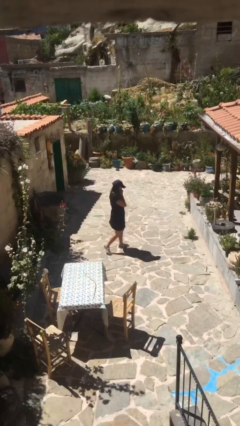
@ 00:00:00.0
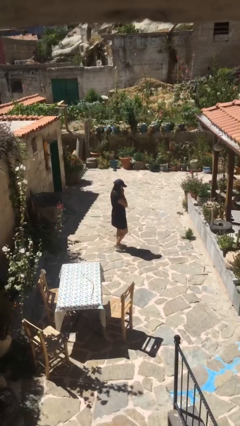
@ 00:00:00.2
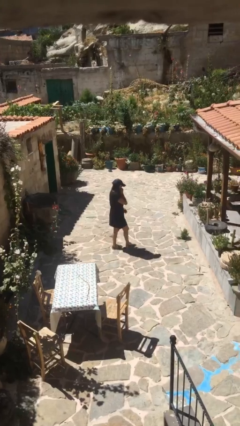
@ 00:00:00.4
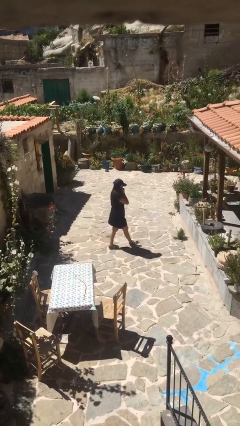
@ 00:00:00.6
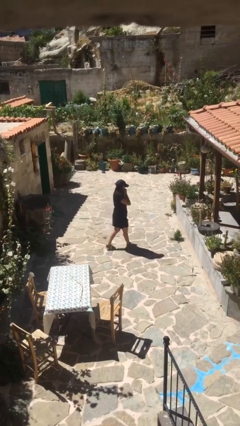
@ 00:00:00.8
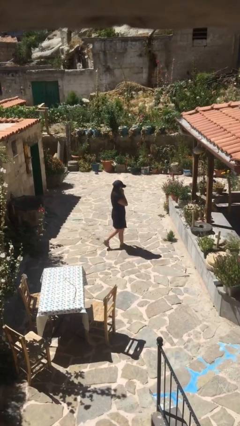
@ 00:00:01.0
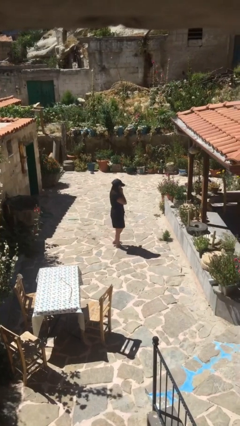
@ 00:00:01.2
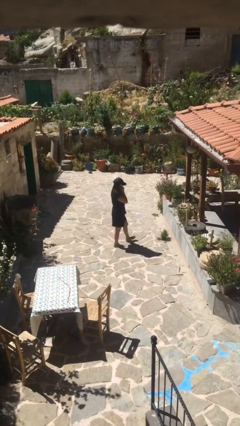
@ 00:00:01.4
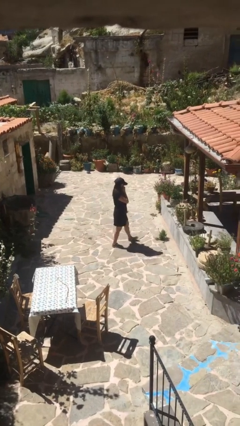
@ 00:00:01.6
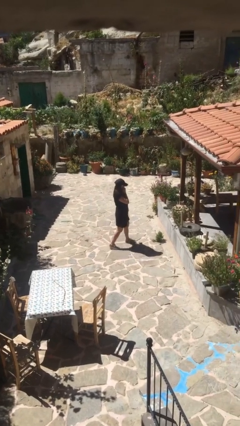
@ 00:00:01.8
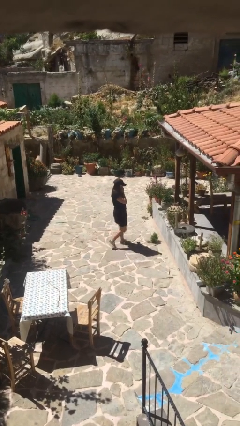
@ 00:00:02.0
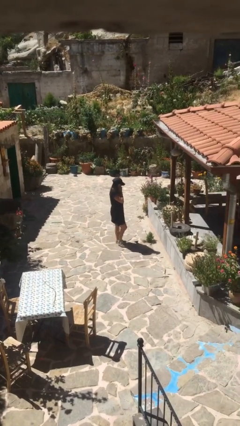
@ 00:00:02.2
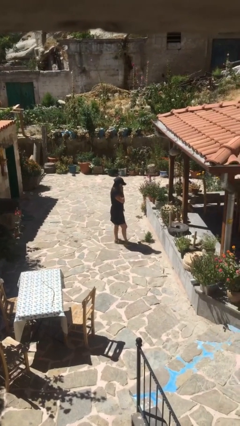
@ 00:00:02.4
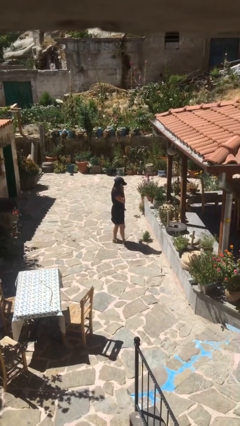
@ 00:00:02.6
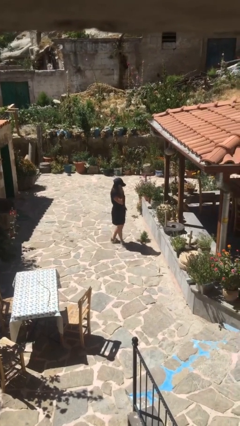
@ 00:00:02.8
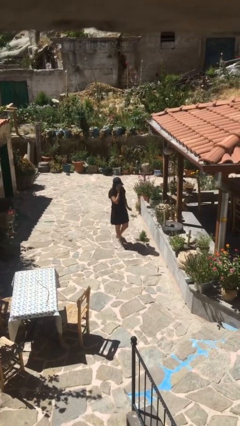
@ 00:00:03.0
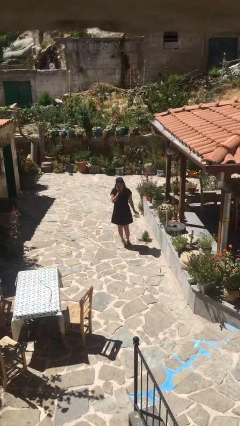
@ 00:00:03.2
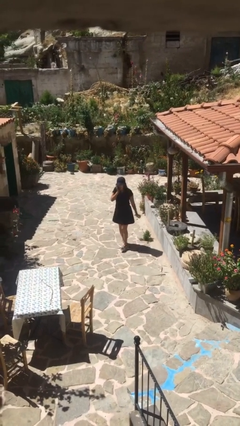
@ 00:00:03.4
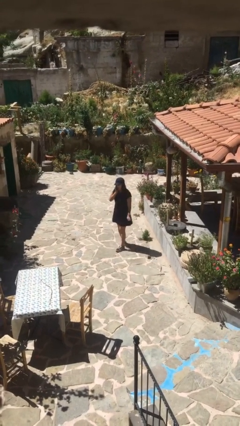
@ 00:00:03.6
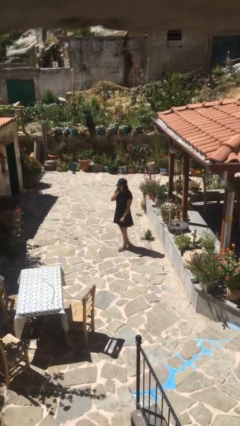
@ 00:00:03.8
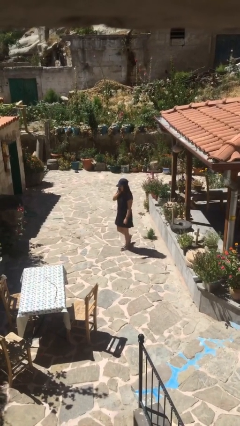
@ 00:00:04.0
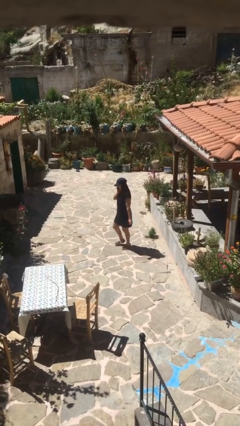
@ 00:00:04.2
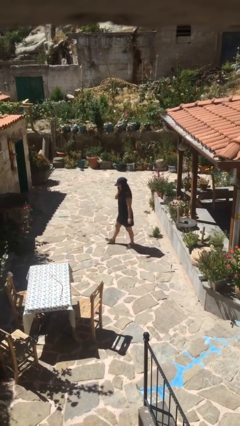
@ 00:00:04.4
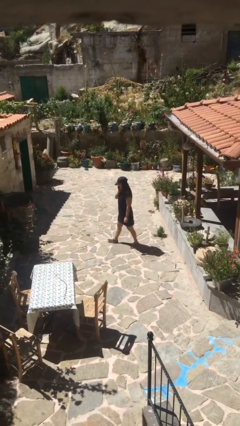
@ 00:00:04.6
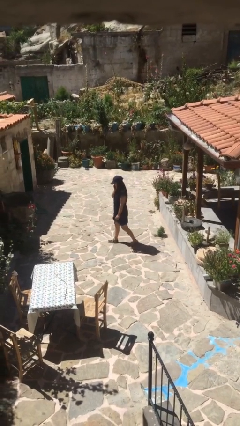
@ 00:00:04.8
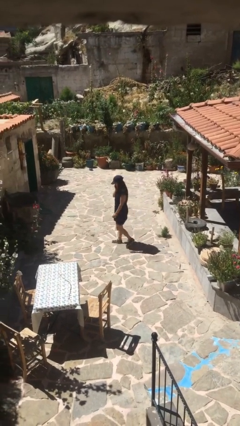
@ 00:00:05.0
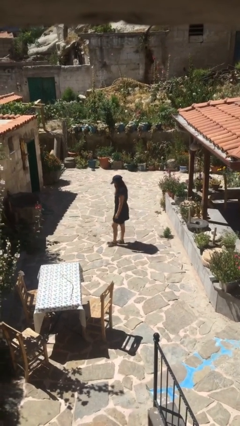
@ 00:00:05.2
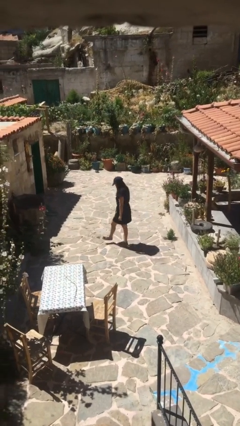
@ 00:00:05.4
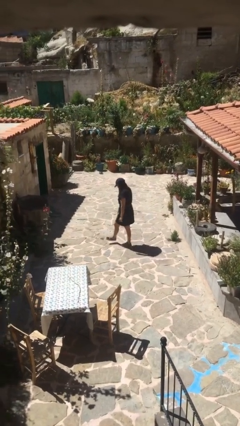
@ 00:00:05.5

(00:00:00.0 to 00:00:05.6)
person talks on phone

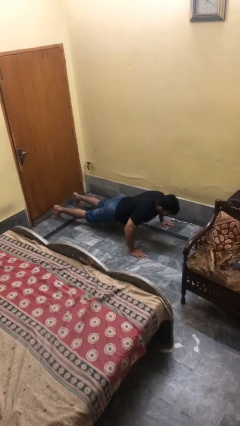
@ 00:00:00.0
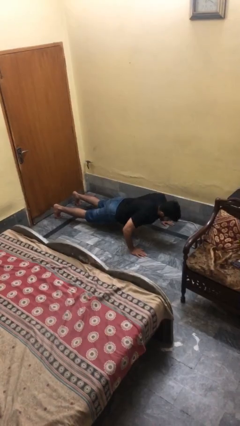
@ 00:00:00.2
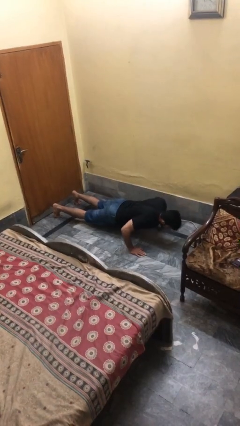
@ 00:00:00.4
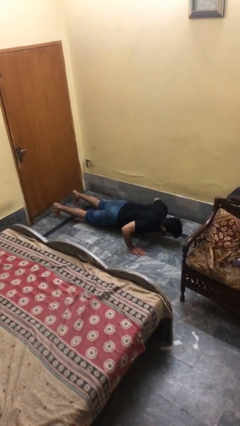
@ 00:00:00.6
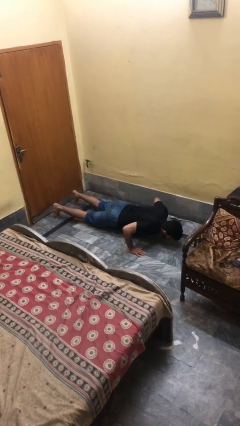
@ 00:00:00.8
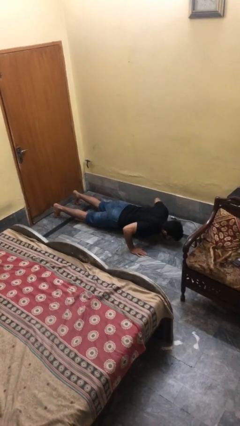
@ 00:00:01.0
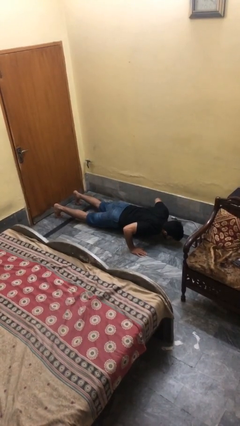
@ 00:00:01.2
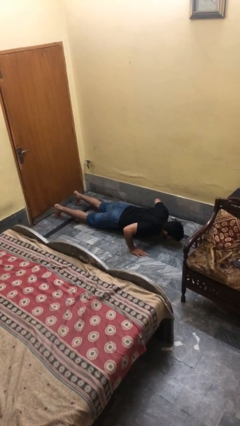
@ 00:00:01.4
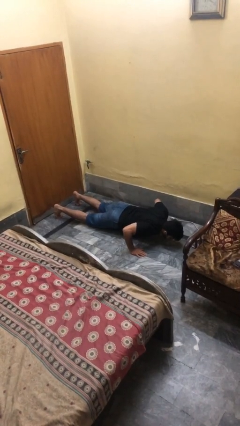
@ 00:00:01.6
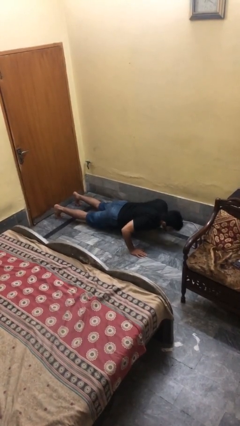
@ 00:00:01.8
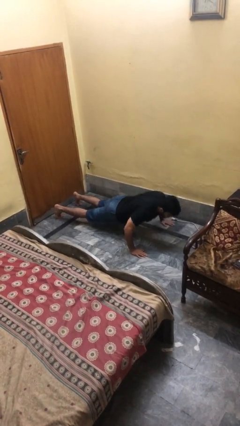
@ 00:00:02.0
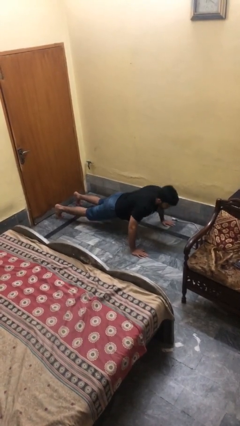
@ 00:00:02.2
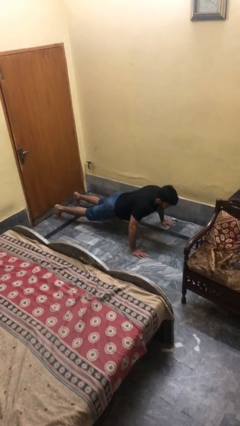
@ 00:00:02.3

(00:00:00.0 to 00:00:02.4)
person exercises with pushup

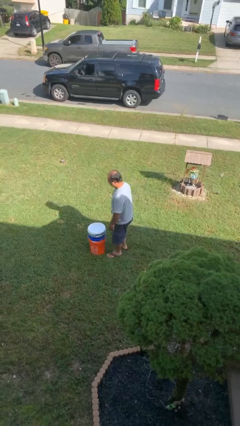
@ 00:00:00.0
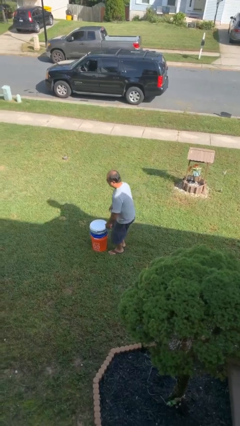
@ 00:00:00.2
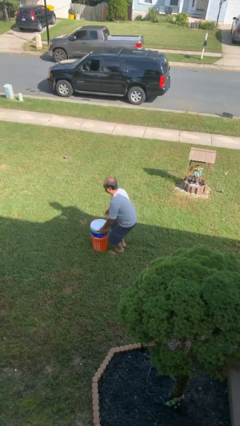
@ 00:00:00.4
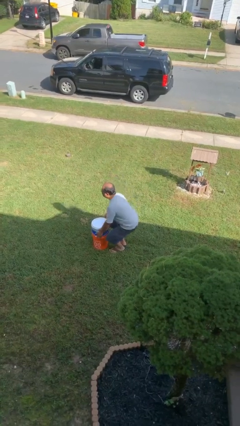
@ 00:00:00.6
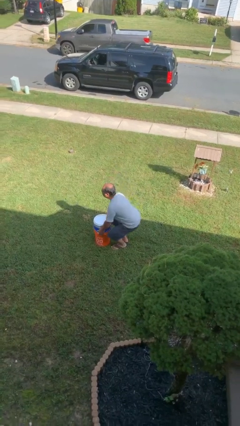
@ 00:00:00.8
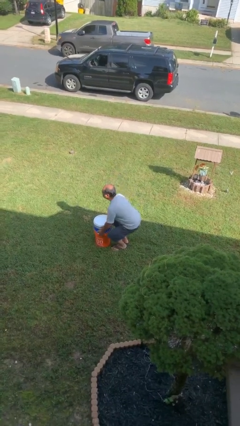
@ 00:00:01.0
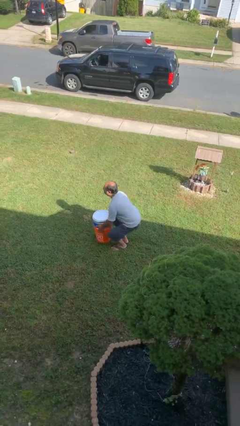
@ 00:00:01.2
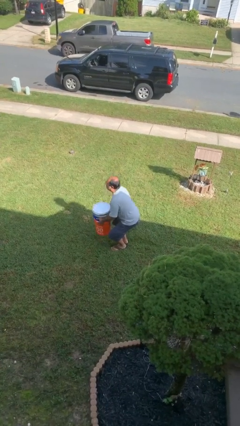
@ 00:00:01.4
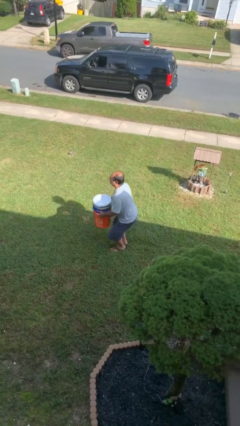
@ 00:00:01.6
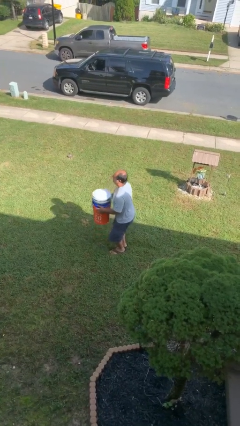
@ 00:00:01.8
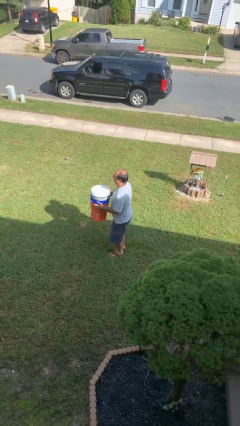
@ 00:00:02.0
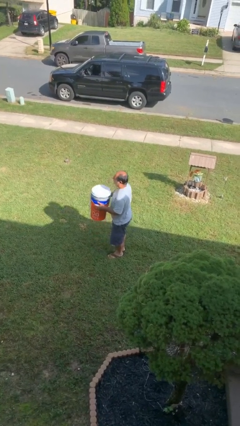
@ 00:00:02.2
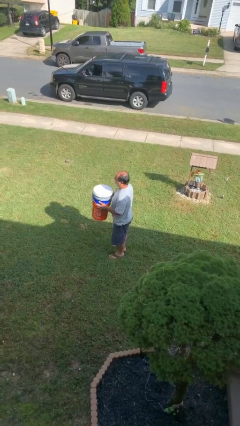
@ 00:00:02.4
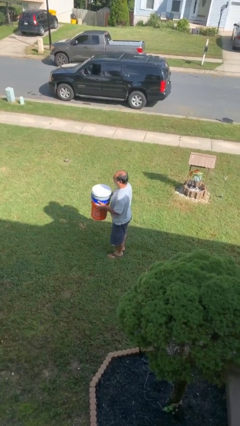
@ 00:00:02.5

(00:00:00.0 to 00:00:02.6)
person picks up object from floor

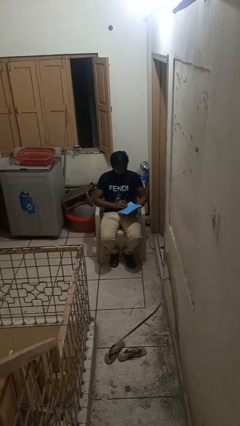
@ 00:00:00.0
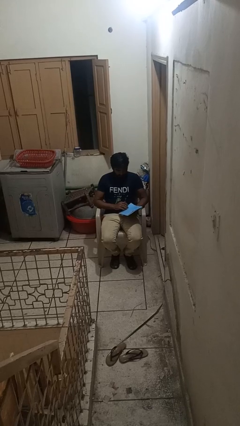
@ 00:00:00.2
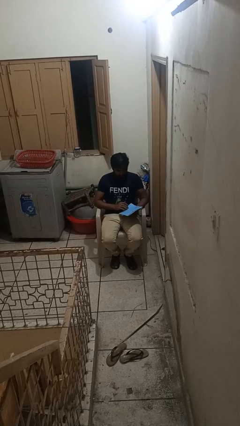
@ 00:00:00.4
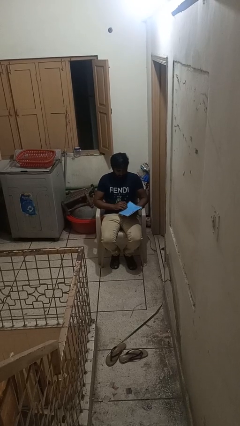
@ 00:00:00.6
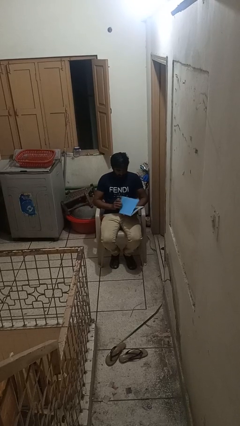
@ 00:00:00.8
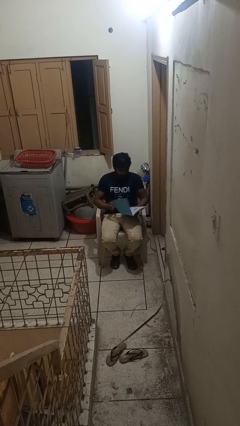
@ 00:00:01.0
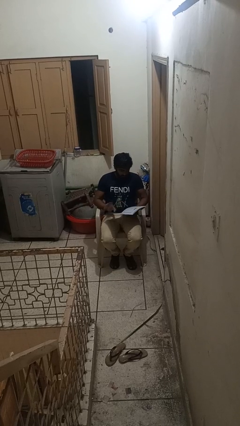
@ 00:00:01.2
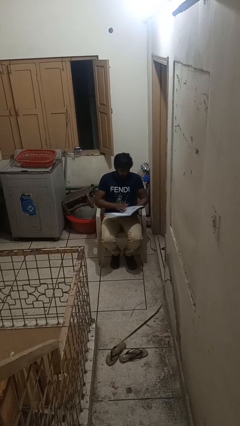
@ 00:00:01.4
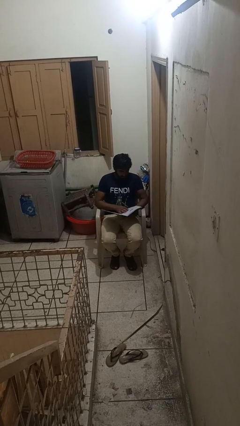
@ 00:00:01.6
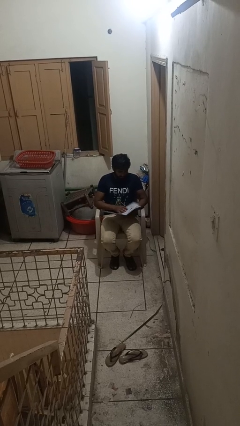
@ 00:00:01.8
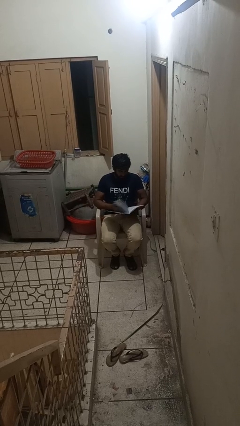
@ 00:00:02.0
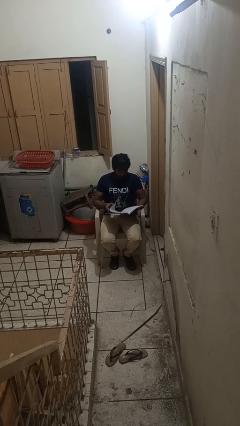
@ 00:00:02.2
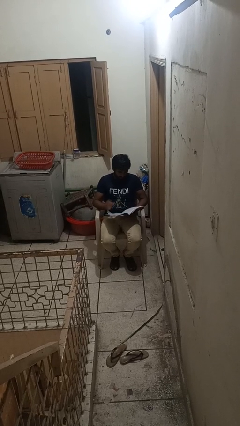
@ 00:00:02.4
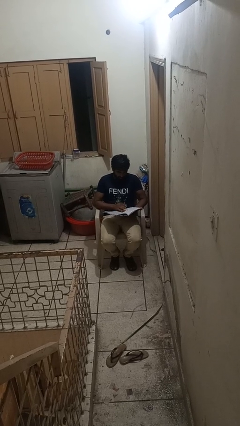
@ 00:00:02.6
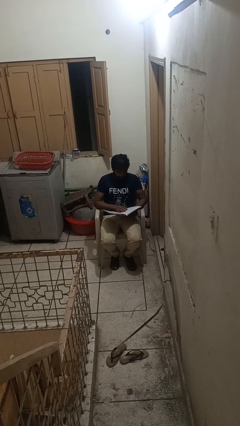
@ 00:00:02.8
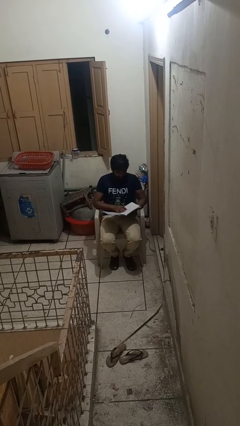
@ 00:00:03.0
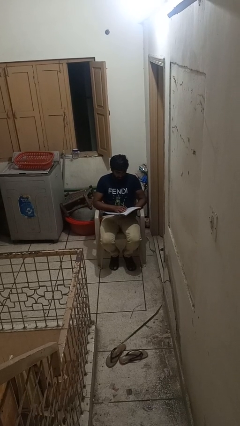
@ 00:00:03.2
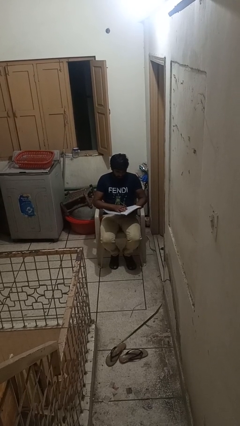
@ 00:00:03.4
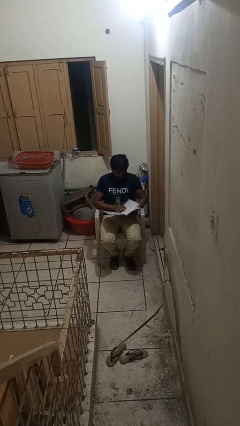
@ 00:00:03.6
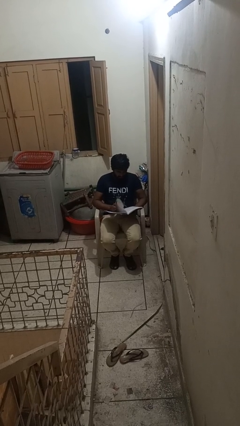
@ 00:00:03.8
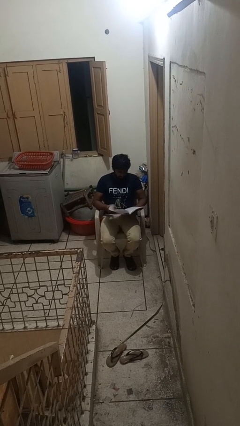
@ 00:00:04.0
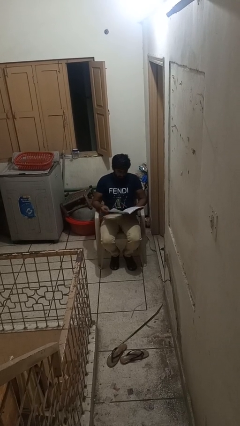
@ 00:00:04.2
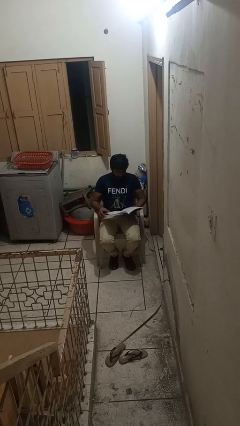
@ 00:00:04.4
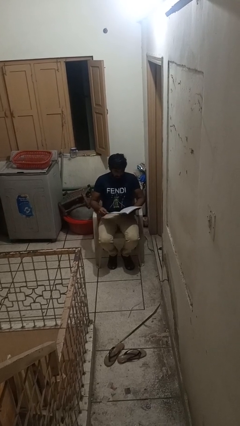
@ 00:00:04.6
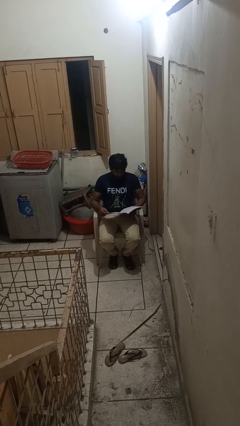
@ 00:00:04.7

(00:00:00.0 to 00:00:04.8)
person reads book

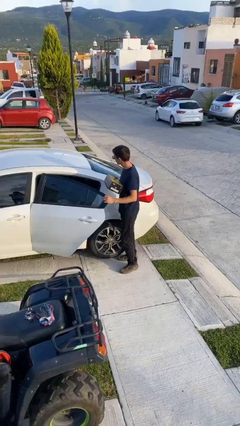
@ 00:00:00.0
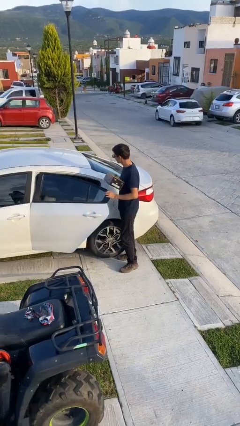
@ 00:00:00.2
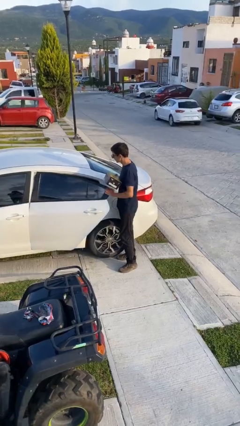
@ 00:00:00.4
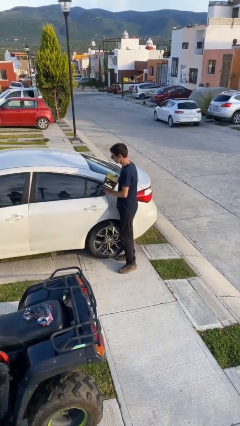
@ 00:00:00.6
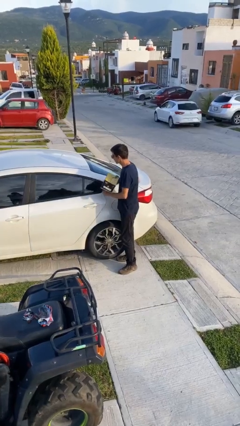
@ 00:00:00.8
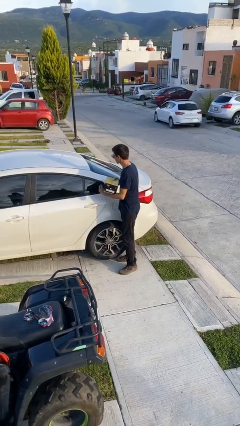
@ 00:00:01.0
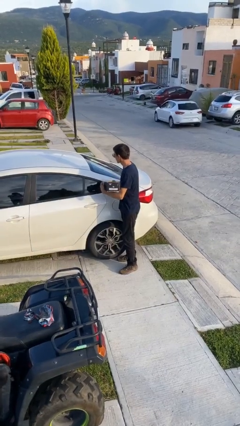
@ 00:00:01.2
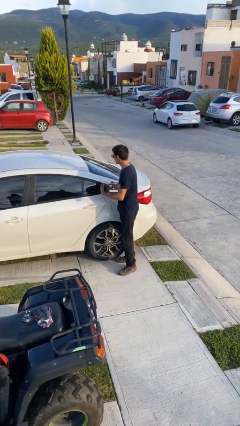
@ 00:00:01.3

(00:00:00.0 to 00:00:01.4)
person closes car door

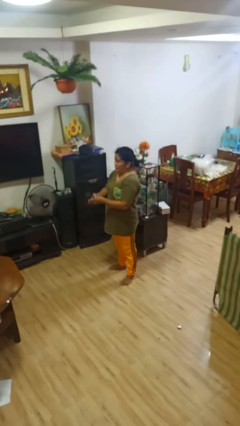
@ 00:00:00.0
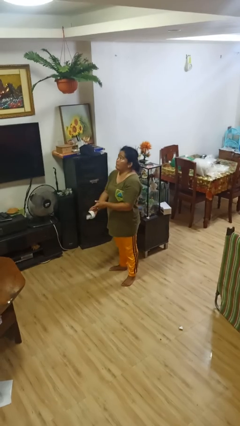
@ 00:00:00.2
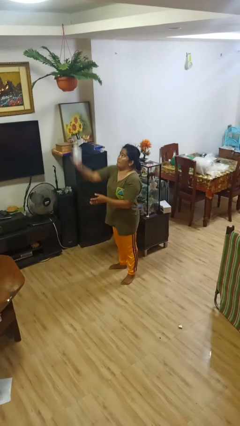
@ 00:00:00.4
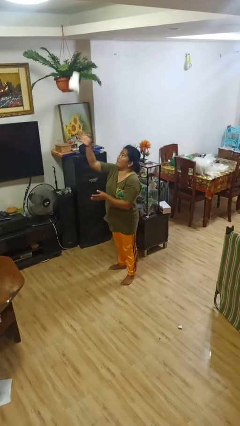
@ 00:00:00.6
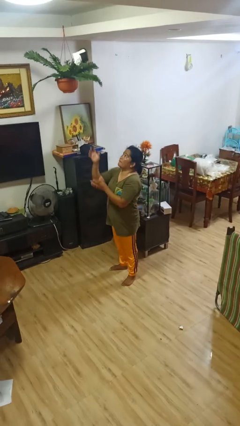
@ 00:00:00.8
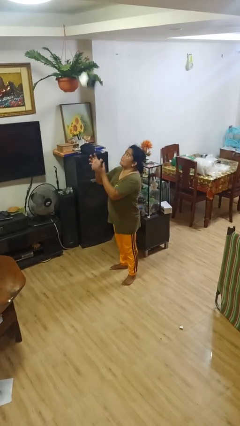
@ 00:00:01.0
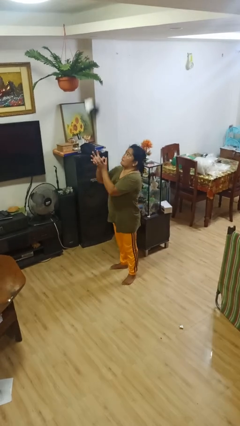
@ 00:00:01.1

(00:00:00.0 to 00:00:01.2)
person drops object
